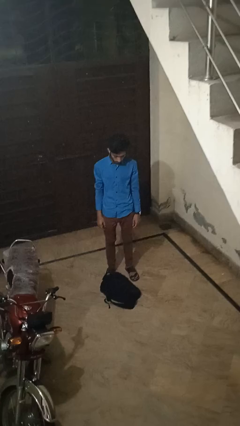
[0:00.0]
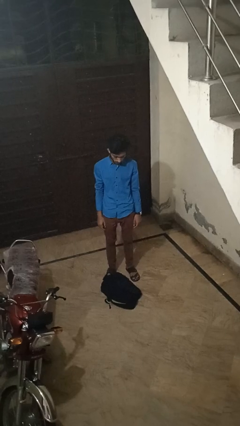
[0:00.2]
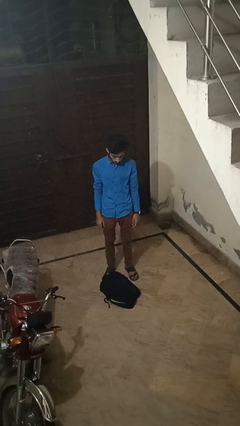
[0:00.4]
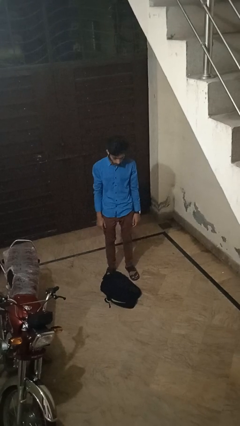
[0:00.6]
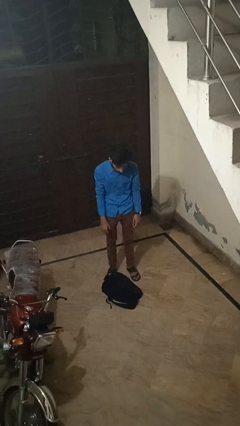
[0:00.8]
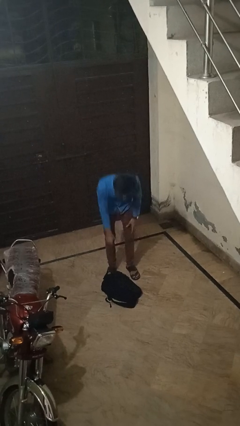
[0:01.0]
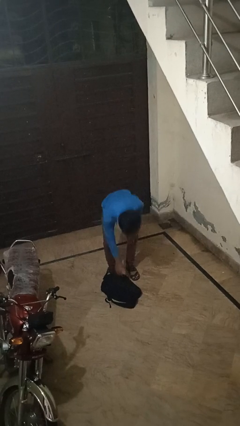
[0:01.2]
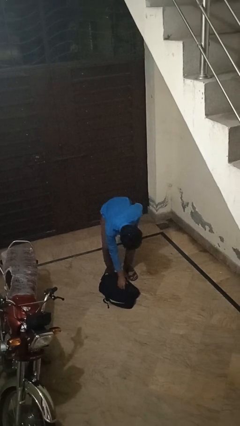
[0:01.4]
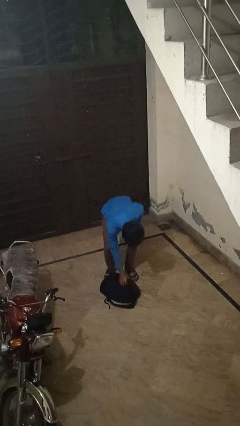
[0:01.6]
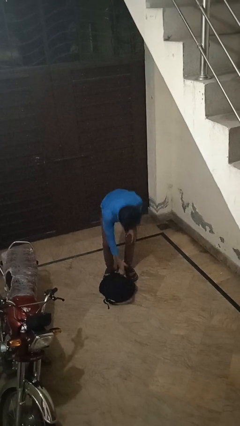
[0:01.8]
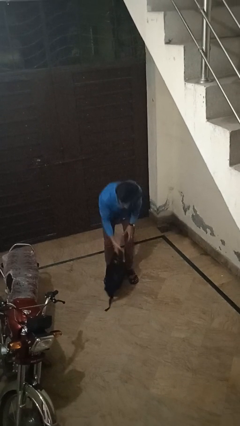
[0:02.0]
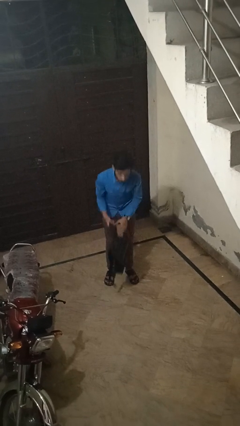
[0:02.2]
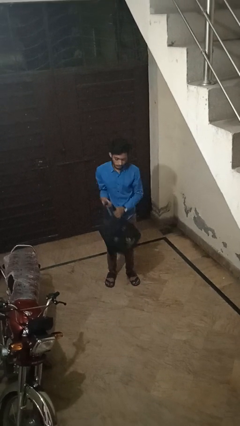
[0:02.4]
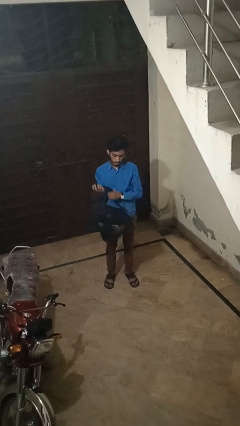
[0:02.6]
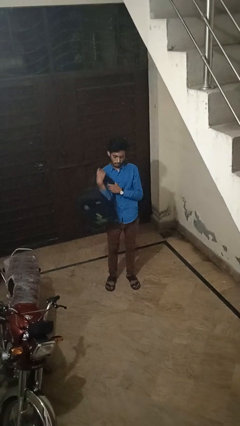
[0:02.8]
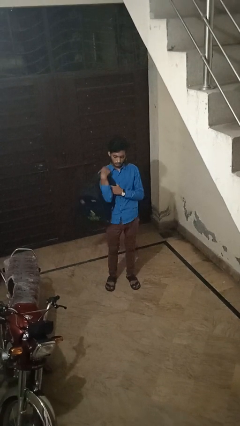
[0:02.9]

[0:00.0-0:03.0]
person picks up object from floor

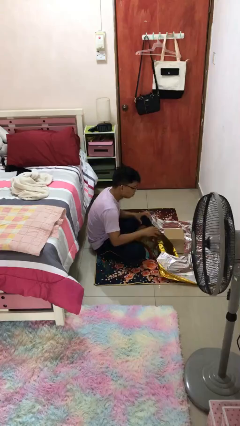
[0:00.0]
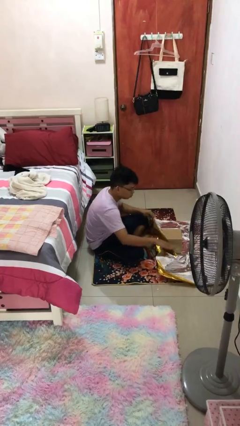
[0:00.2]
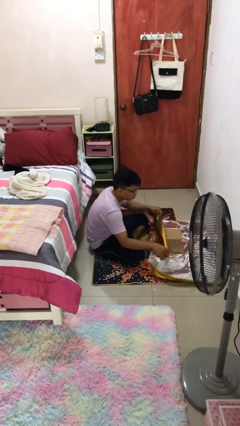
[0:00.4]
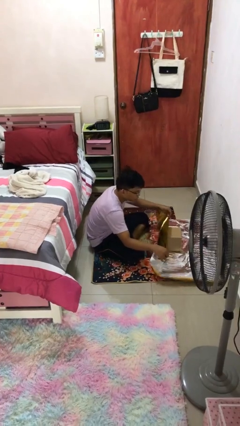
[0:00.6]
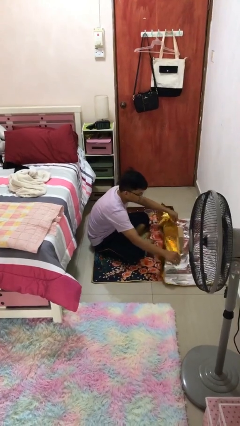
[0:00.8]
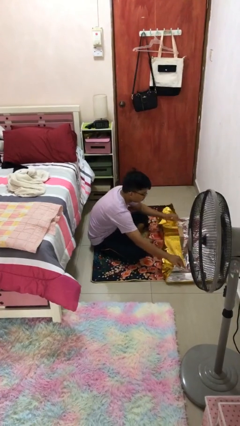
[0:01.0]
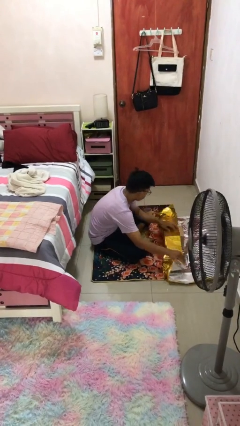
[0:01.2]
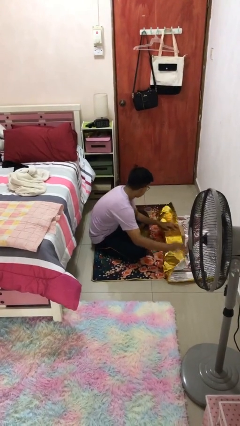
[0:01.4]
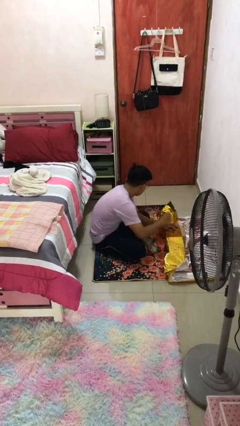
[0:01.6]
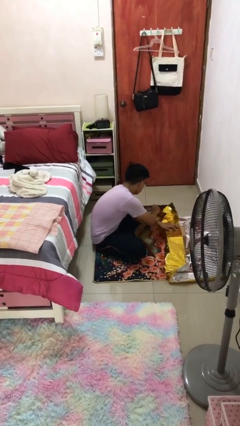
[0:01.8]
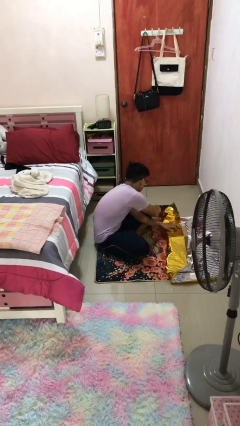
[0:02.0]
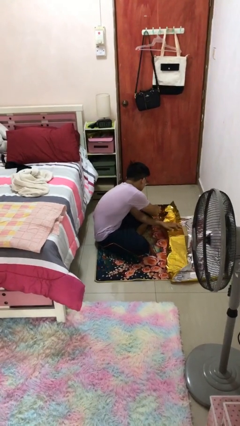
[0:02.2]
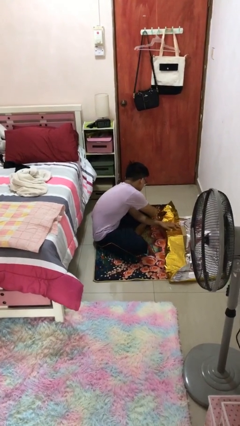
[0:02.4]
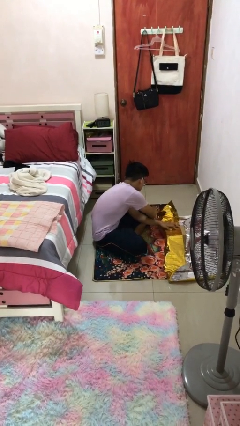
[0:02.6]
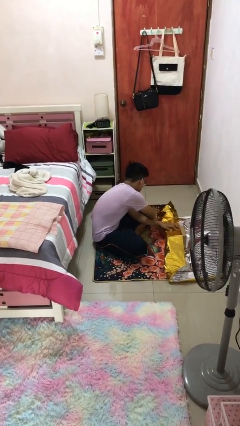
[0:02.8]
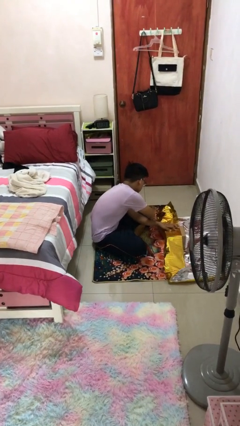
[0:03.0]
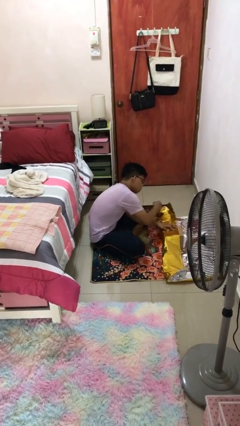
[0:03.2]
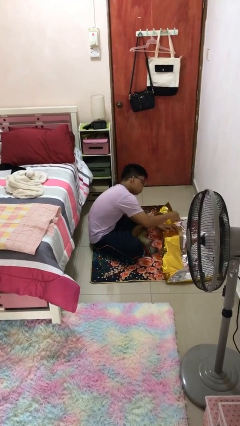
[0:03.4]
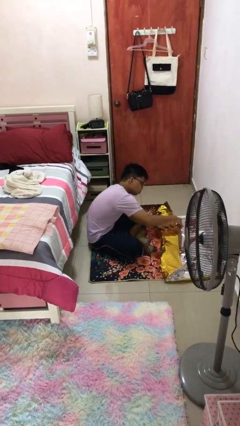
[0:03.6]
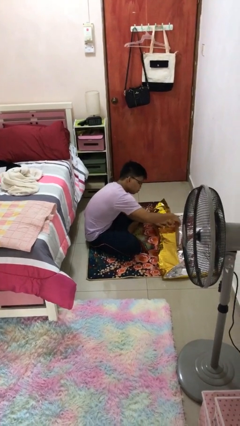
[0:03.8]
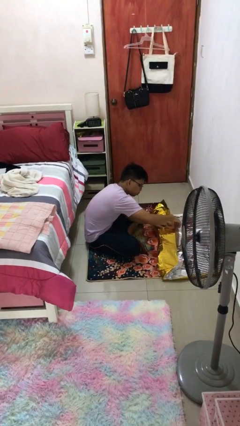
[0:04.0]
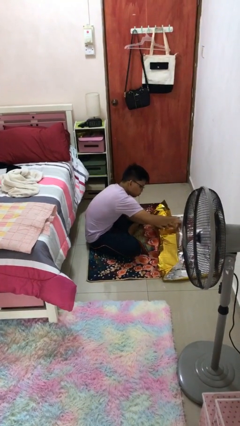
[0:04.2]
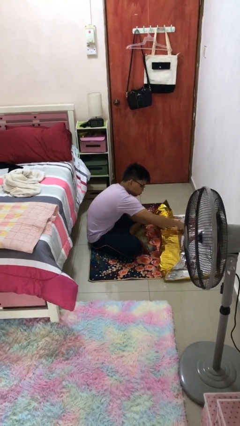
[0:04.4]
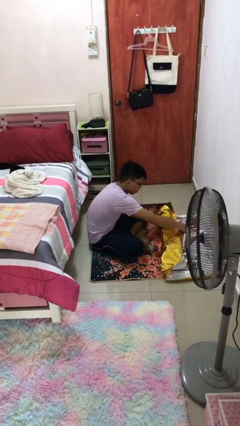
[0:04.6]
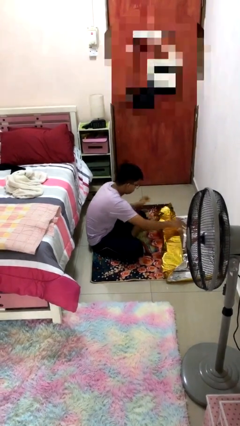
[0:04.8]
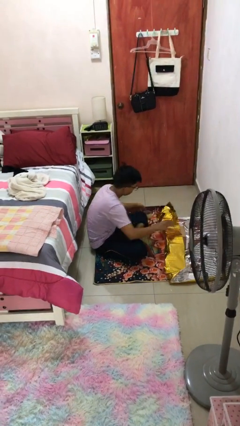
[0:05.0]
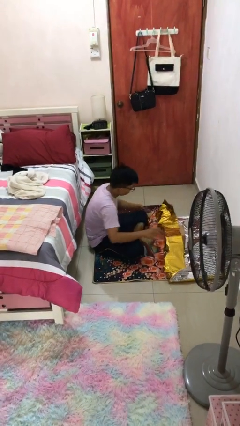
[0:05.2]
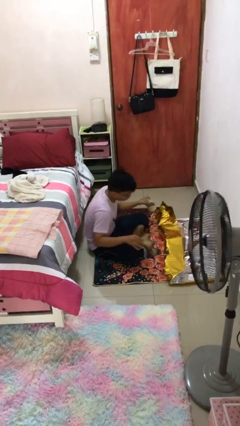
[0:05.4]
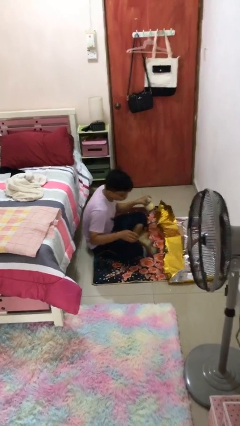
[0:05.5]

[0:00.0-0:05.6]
person wraps box

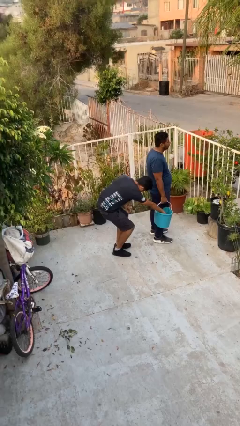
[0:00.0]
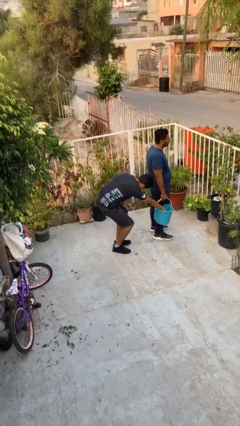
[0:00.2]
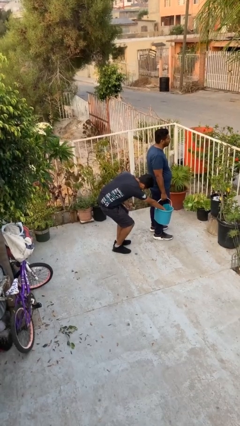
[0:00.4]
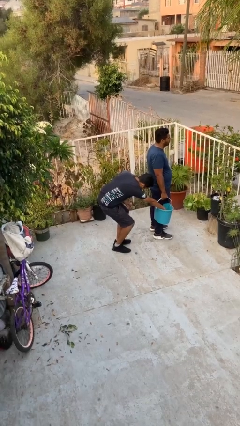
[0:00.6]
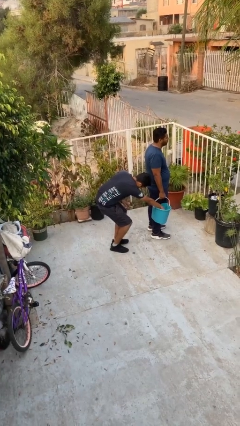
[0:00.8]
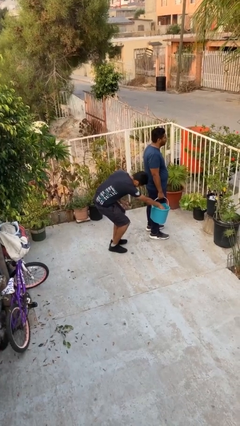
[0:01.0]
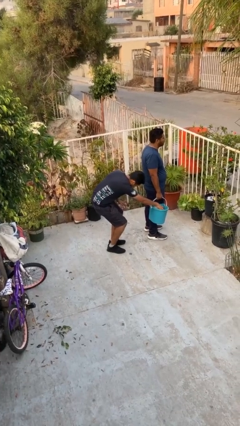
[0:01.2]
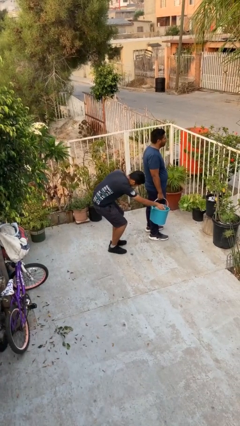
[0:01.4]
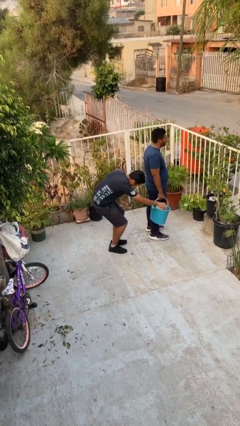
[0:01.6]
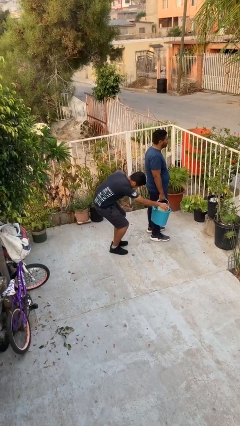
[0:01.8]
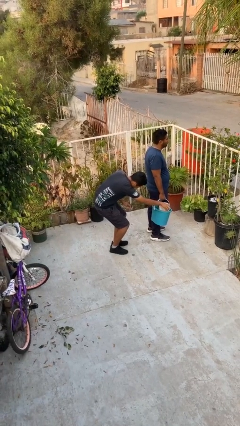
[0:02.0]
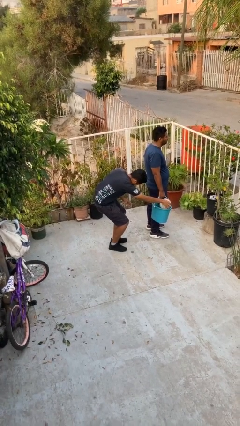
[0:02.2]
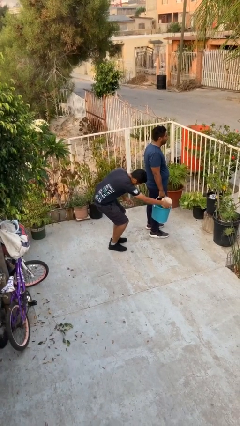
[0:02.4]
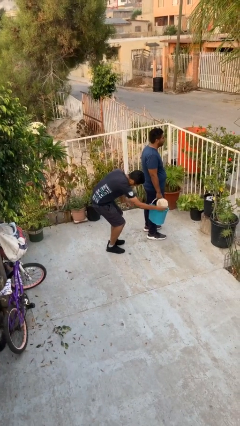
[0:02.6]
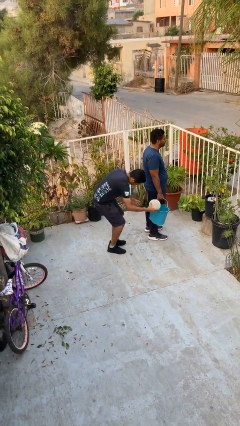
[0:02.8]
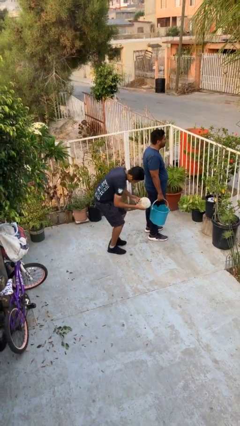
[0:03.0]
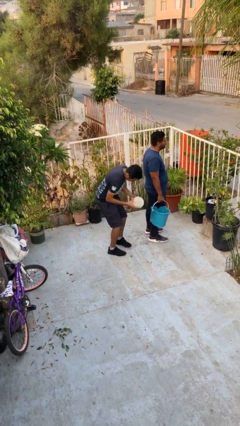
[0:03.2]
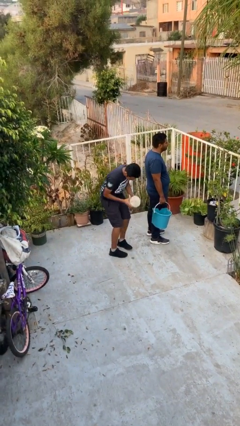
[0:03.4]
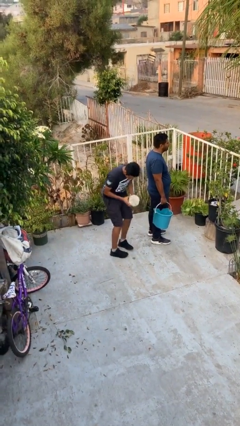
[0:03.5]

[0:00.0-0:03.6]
person steals object from person

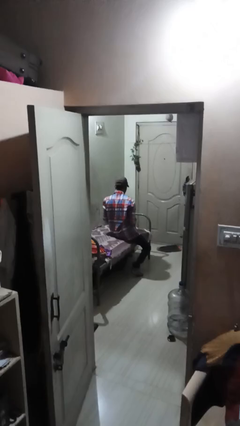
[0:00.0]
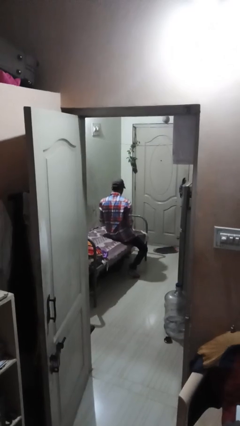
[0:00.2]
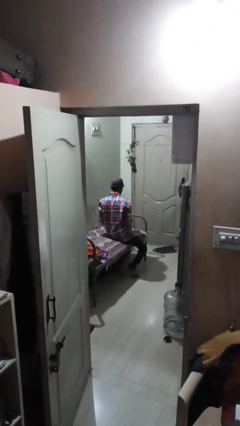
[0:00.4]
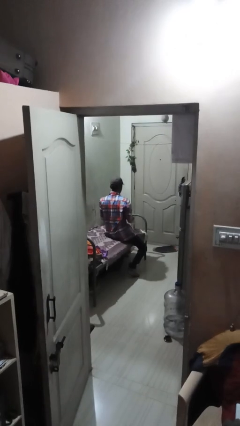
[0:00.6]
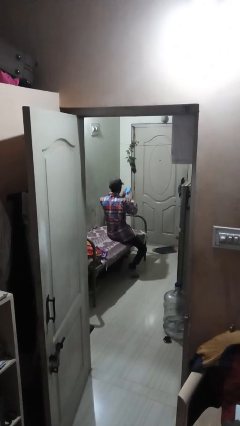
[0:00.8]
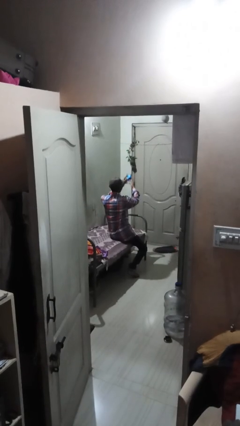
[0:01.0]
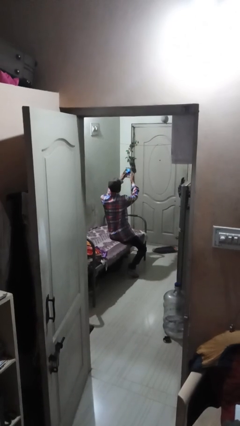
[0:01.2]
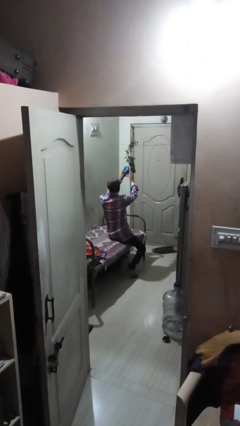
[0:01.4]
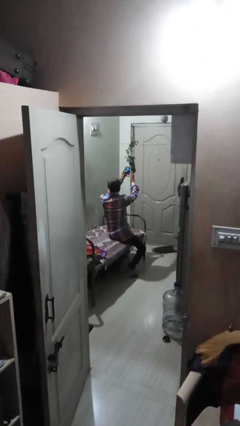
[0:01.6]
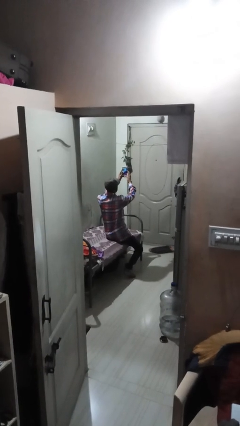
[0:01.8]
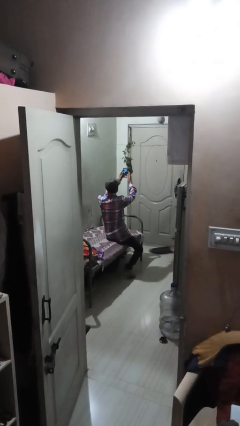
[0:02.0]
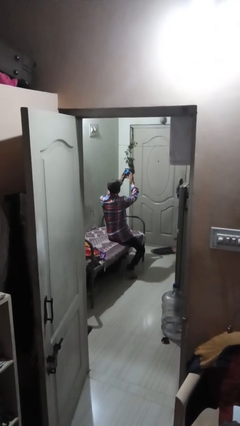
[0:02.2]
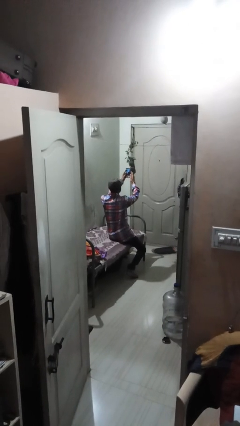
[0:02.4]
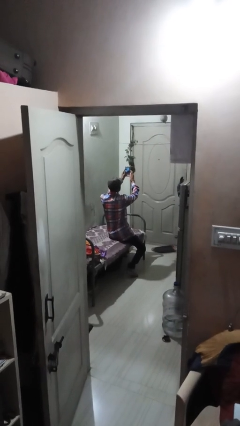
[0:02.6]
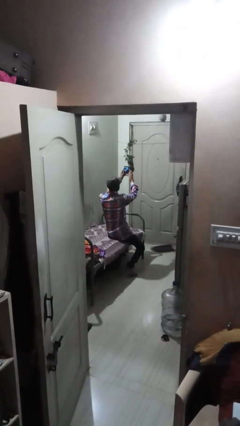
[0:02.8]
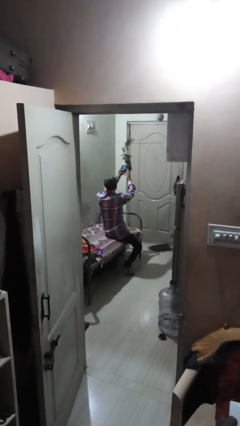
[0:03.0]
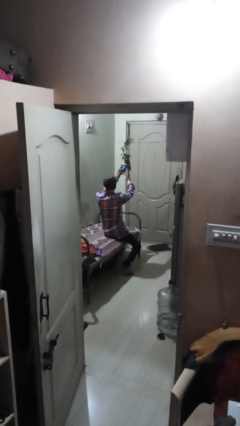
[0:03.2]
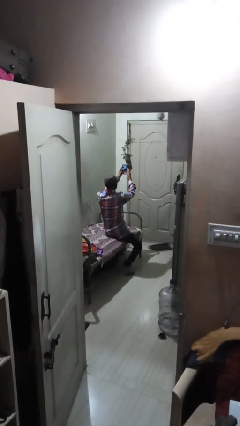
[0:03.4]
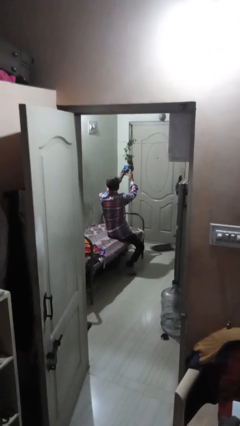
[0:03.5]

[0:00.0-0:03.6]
person takes selfie

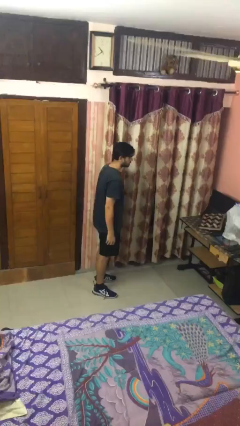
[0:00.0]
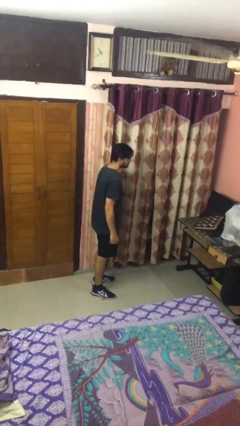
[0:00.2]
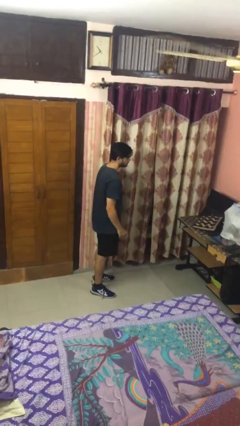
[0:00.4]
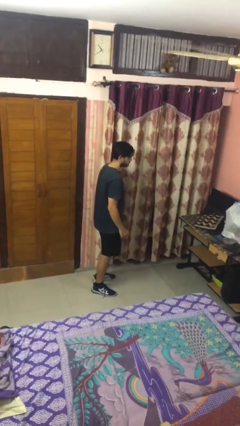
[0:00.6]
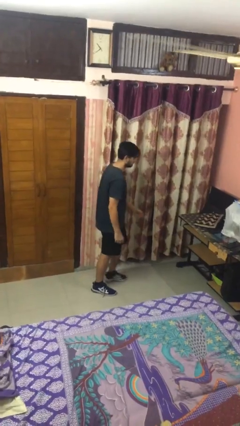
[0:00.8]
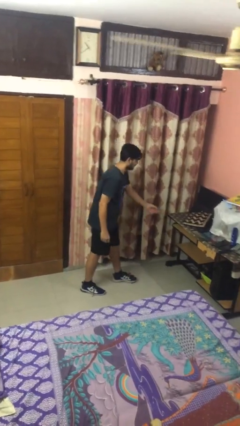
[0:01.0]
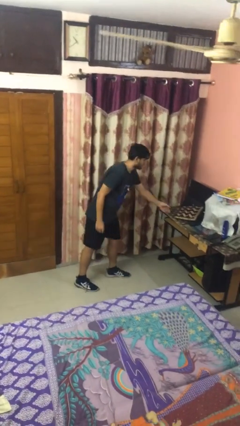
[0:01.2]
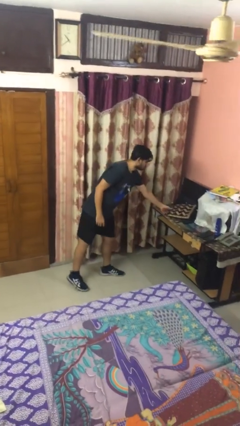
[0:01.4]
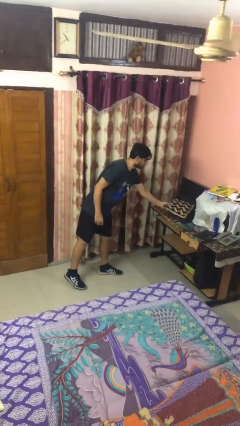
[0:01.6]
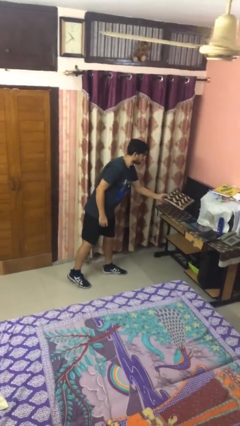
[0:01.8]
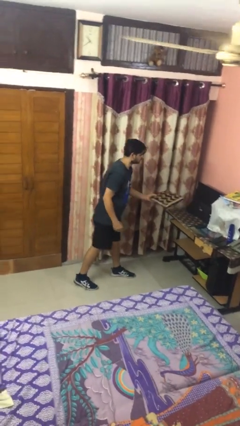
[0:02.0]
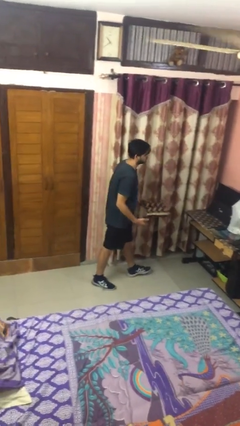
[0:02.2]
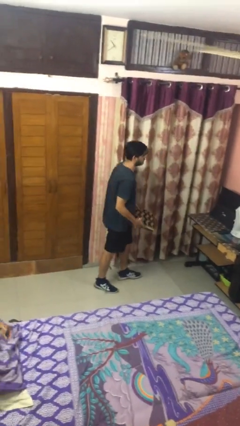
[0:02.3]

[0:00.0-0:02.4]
person picks up object from table
